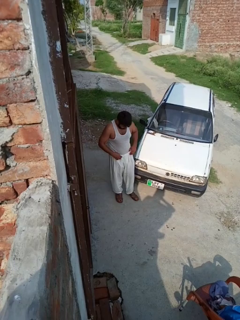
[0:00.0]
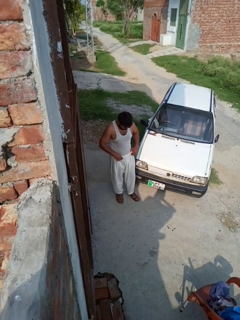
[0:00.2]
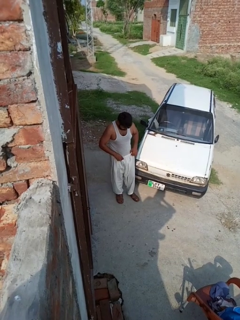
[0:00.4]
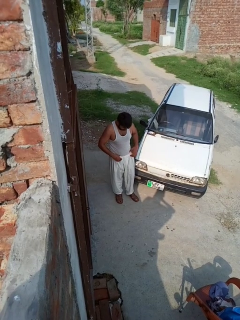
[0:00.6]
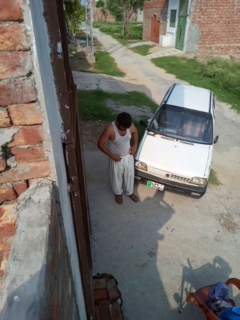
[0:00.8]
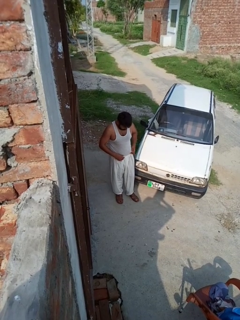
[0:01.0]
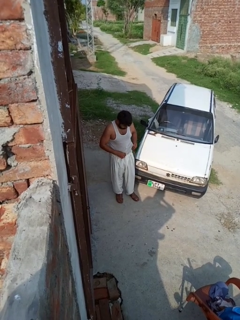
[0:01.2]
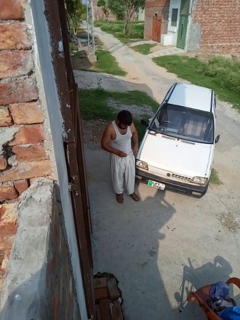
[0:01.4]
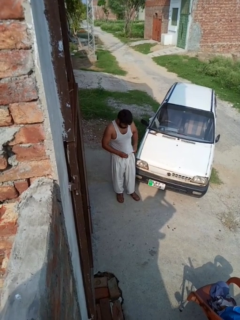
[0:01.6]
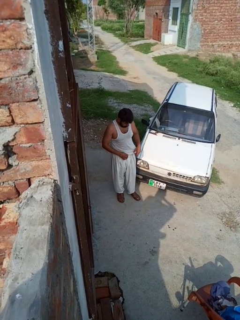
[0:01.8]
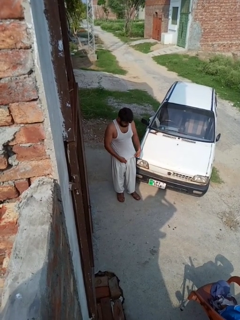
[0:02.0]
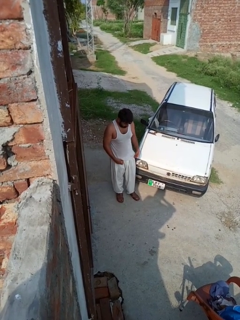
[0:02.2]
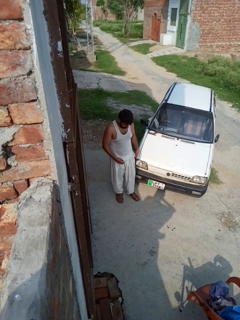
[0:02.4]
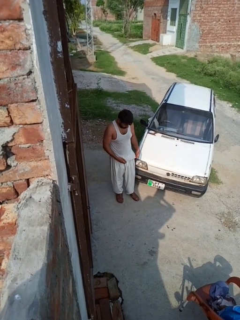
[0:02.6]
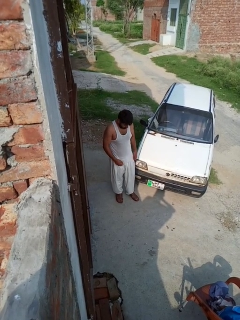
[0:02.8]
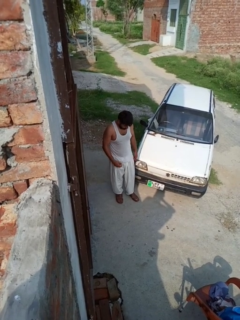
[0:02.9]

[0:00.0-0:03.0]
person untucks shirt

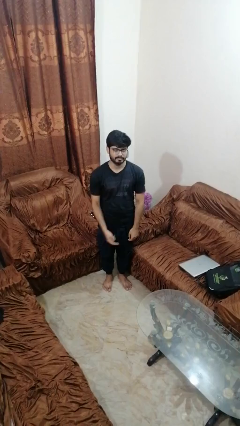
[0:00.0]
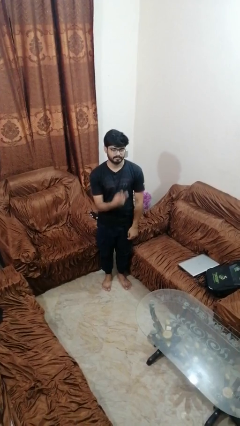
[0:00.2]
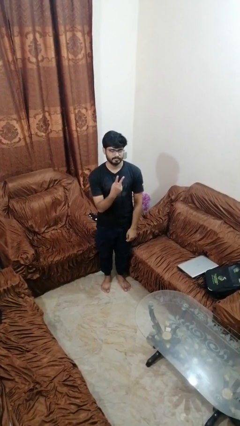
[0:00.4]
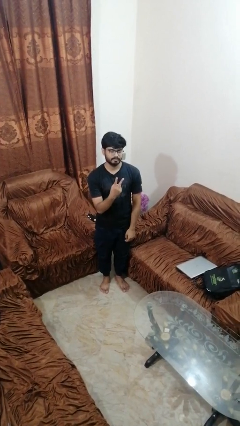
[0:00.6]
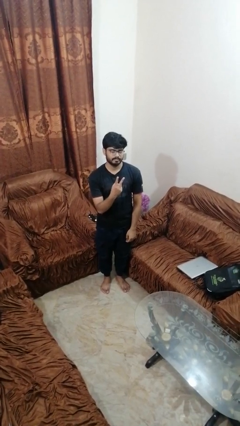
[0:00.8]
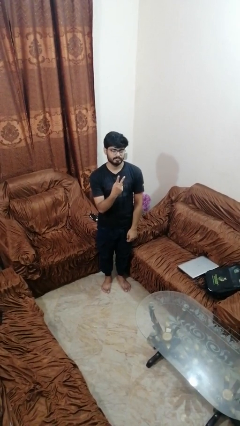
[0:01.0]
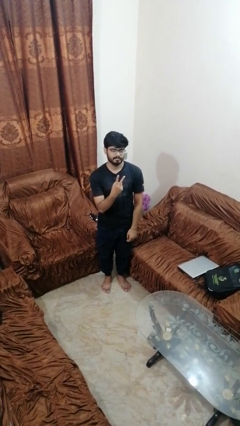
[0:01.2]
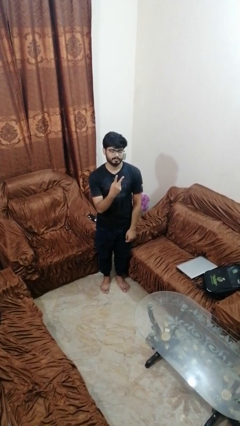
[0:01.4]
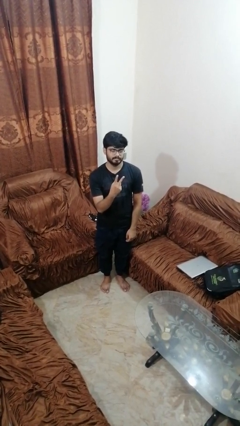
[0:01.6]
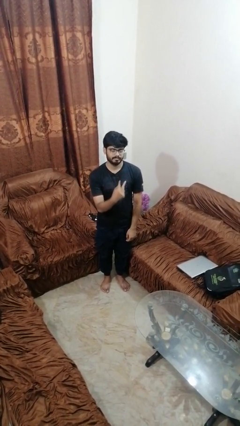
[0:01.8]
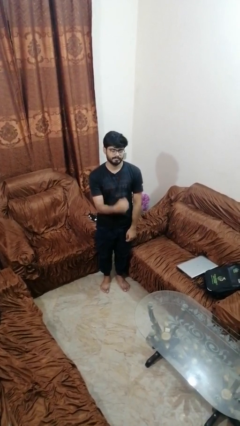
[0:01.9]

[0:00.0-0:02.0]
person gestures peace

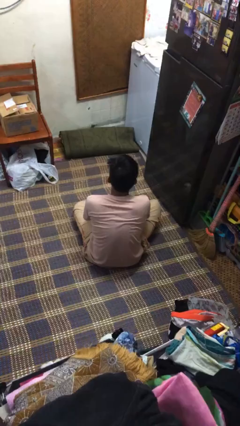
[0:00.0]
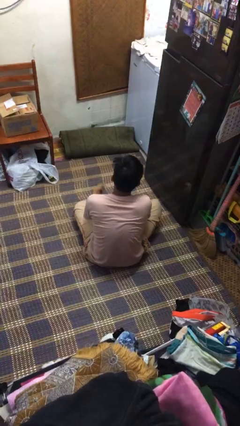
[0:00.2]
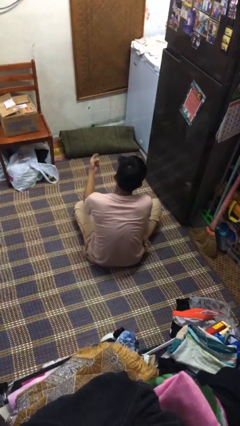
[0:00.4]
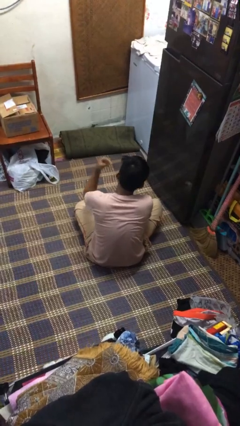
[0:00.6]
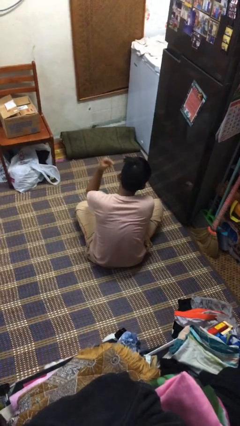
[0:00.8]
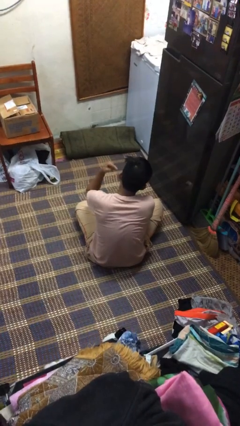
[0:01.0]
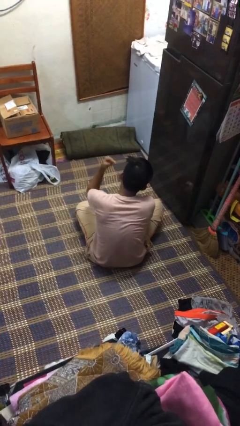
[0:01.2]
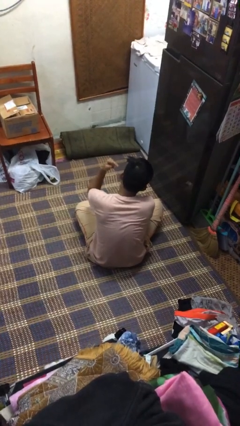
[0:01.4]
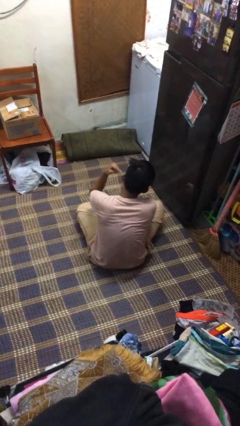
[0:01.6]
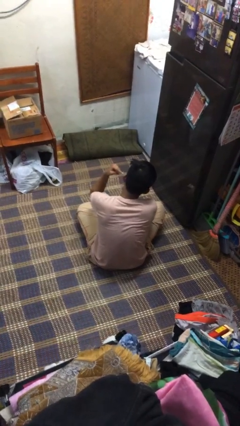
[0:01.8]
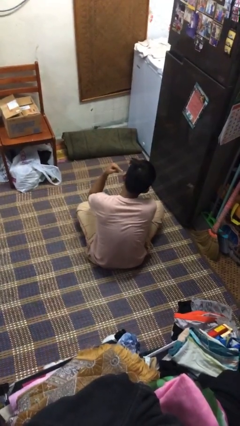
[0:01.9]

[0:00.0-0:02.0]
person gestures listen closely

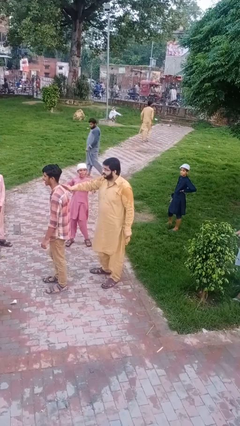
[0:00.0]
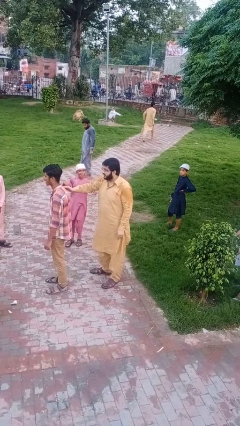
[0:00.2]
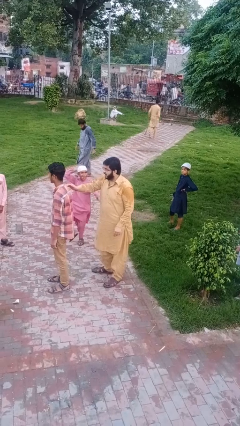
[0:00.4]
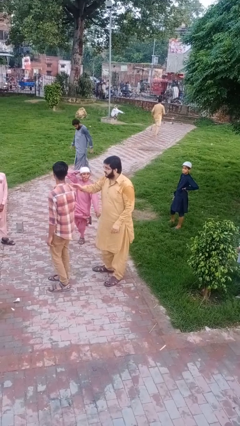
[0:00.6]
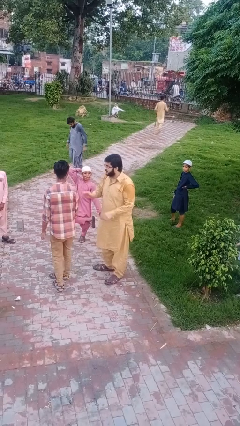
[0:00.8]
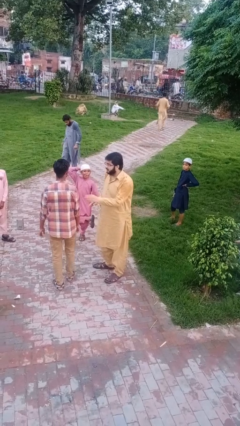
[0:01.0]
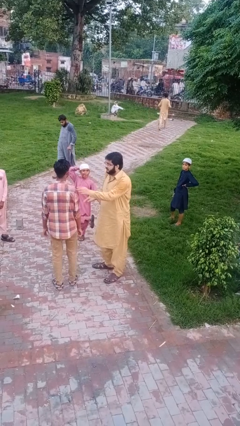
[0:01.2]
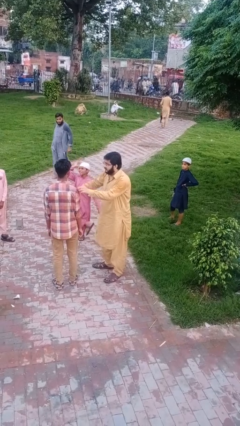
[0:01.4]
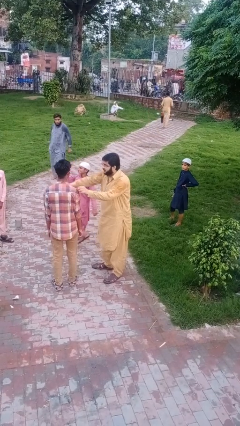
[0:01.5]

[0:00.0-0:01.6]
person grabs person by shoulder

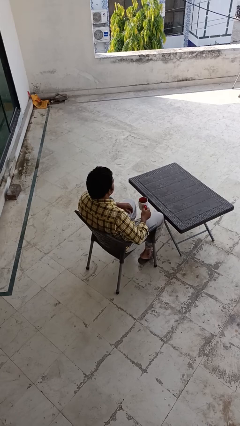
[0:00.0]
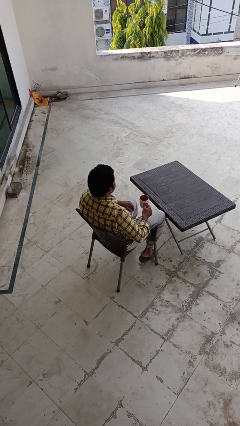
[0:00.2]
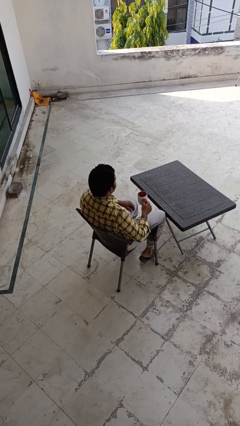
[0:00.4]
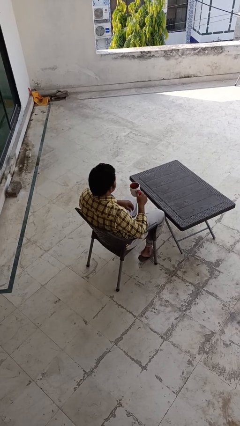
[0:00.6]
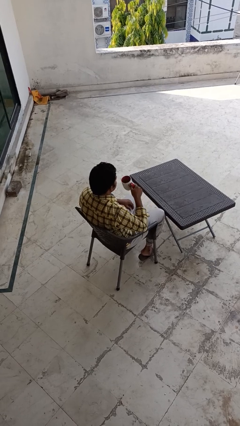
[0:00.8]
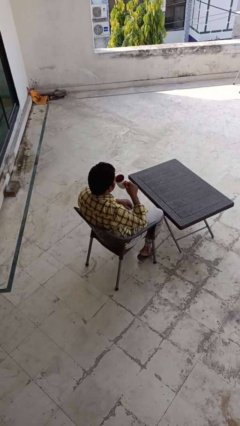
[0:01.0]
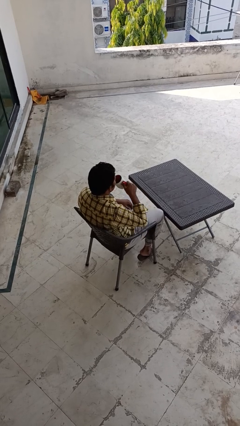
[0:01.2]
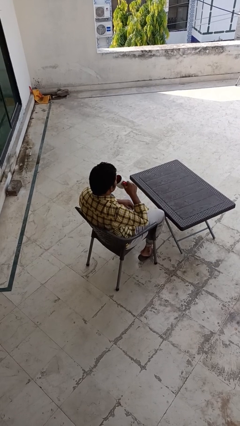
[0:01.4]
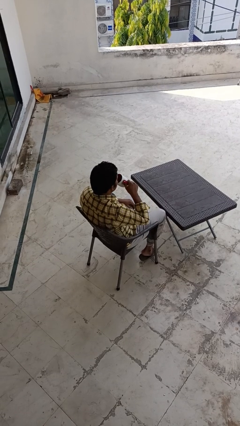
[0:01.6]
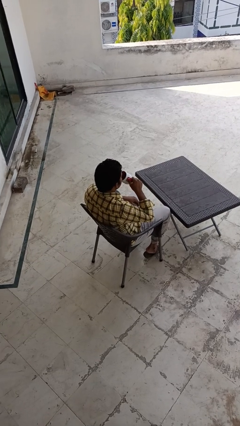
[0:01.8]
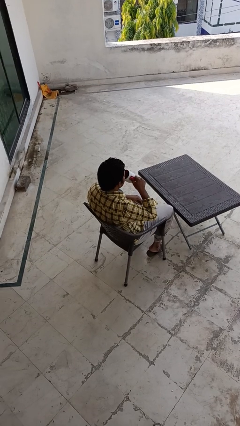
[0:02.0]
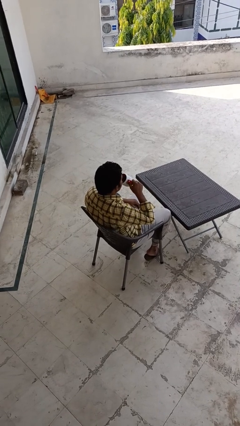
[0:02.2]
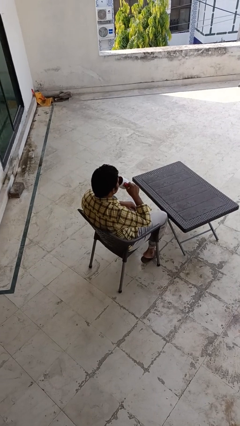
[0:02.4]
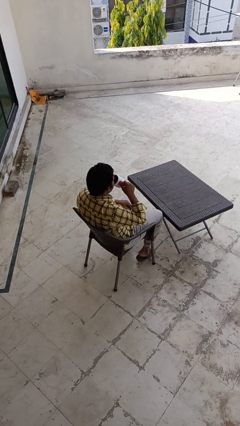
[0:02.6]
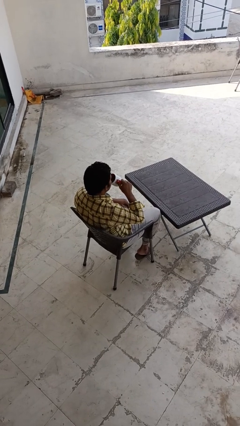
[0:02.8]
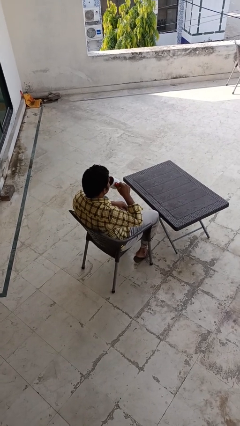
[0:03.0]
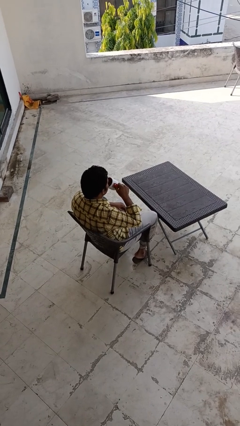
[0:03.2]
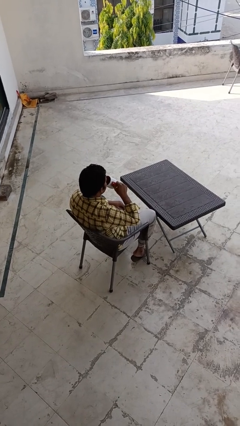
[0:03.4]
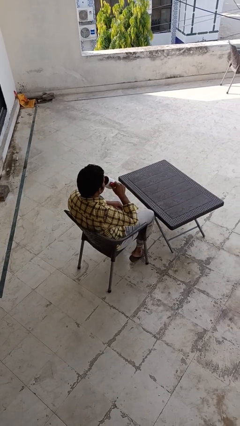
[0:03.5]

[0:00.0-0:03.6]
person drinks from mug

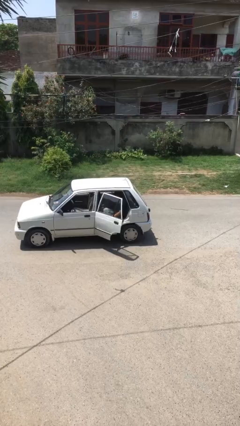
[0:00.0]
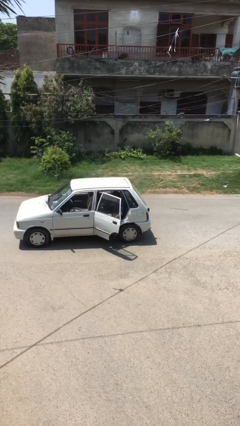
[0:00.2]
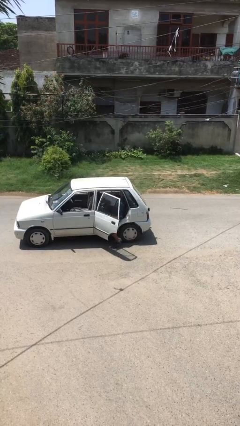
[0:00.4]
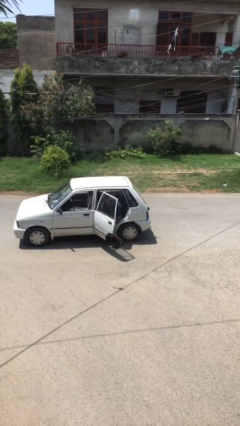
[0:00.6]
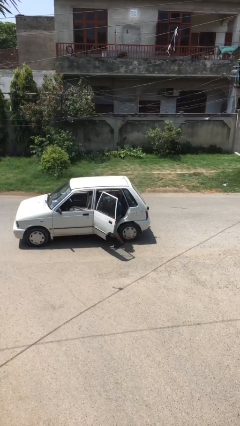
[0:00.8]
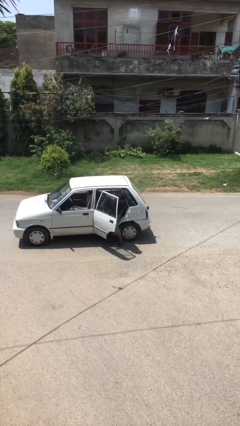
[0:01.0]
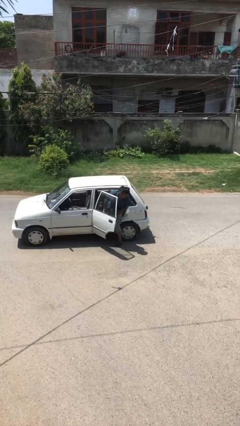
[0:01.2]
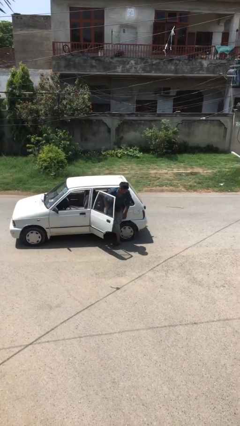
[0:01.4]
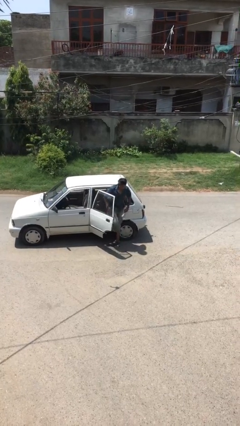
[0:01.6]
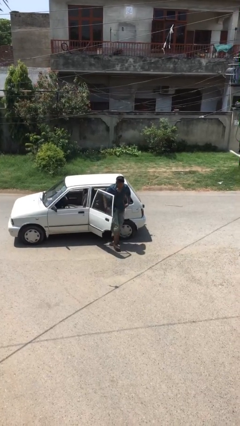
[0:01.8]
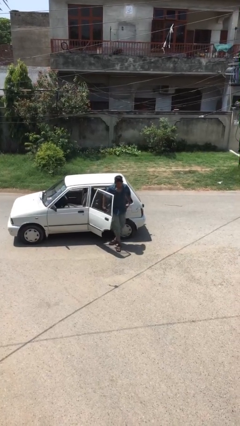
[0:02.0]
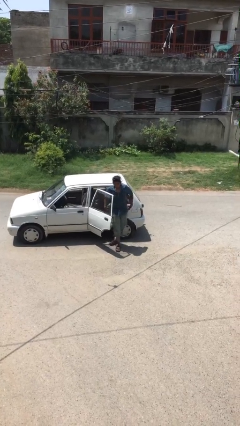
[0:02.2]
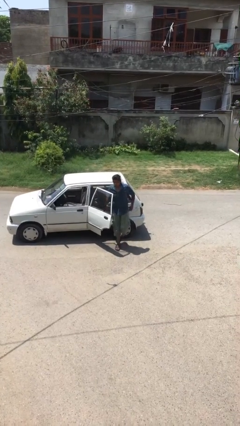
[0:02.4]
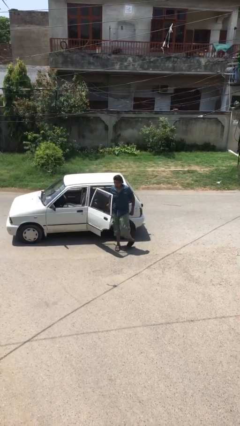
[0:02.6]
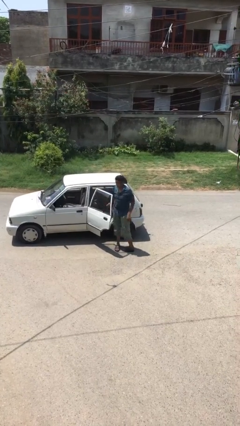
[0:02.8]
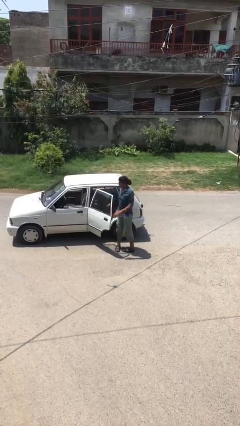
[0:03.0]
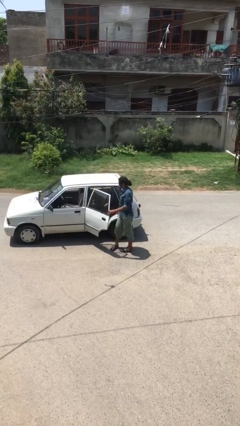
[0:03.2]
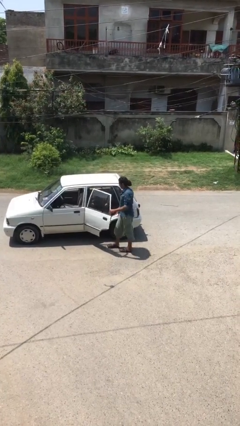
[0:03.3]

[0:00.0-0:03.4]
person exits car

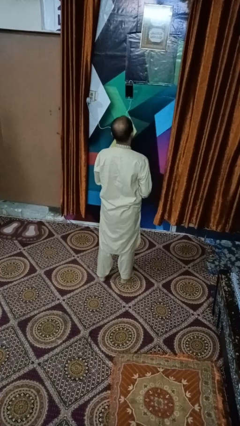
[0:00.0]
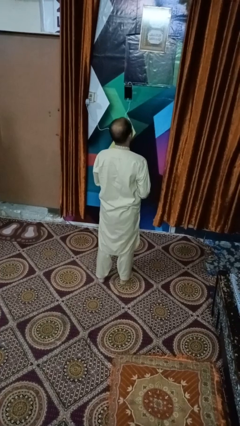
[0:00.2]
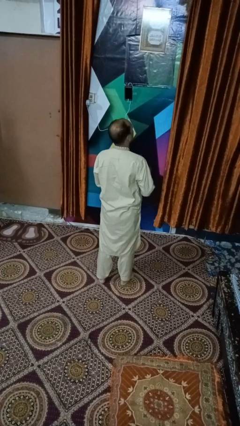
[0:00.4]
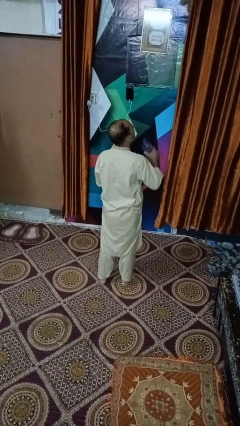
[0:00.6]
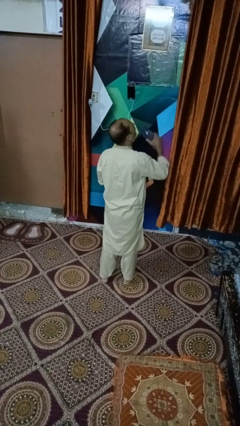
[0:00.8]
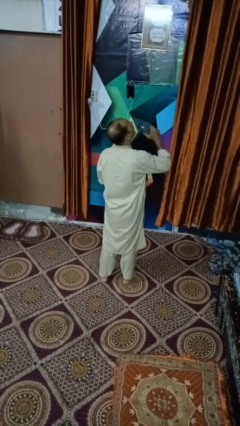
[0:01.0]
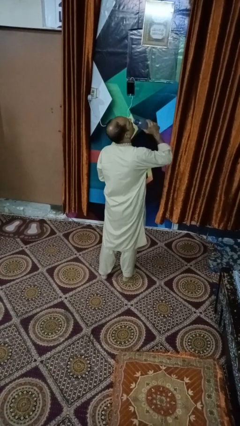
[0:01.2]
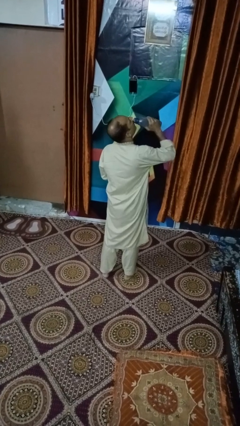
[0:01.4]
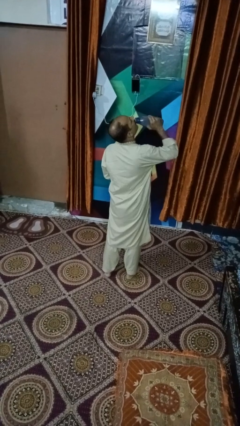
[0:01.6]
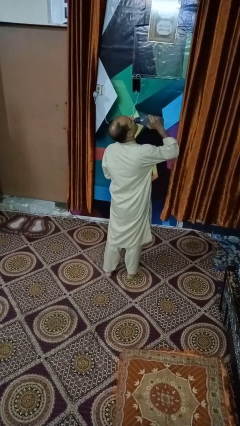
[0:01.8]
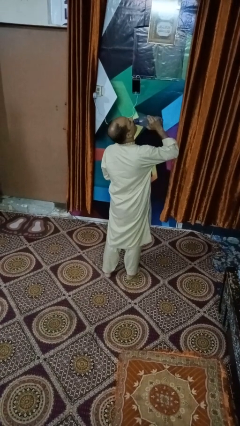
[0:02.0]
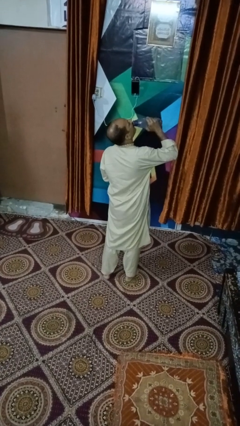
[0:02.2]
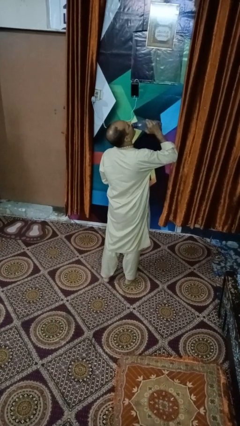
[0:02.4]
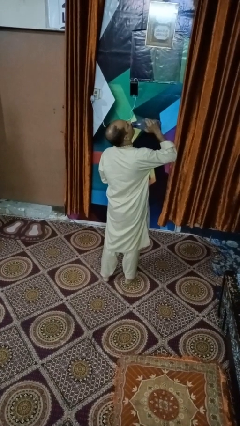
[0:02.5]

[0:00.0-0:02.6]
person drinks from bottle
